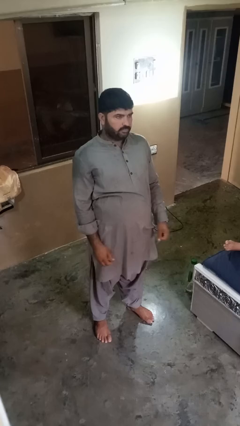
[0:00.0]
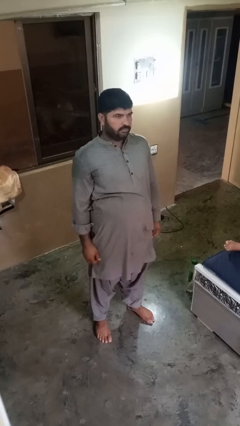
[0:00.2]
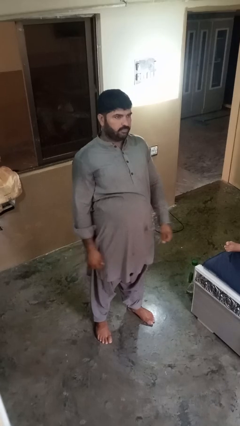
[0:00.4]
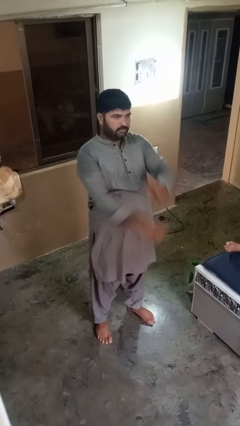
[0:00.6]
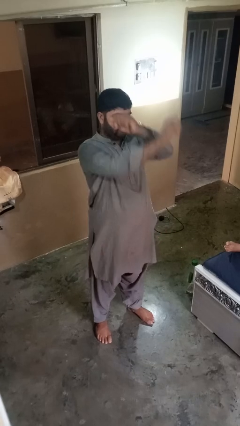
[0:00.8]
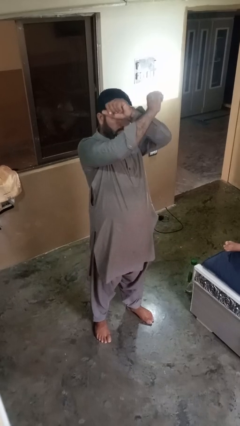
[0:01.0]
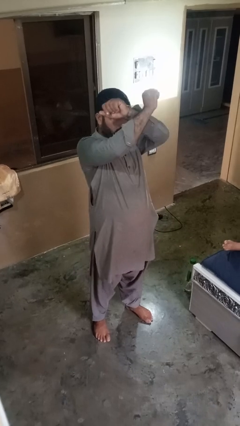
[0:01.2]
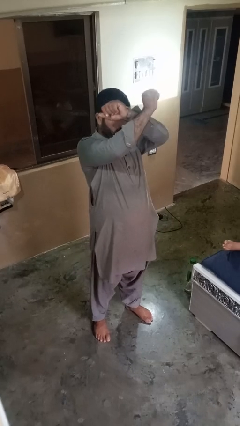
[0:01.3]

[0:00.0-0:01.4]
person gestures arms x

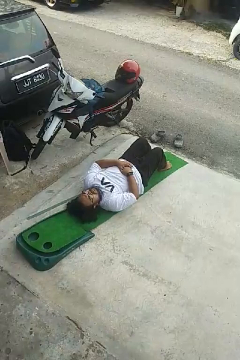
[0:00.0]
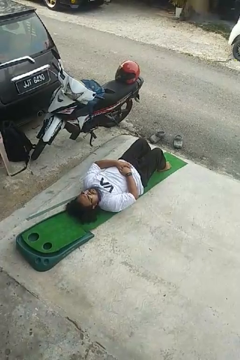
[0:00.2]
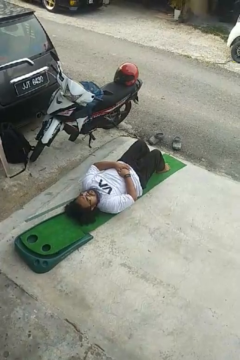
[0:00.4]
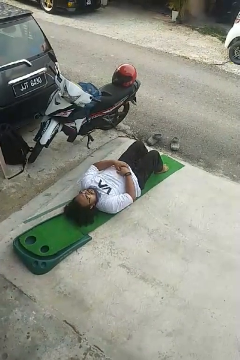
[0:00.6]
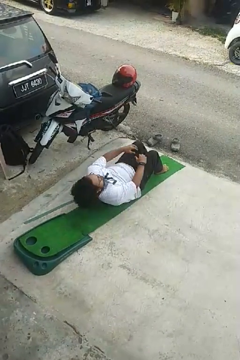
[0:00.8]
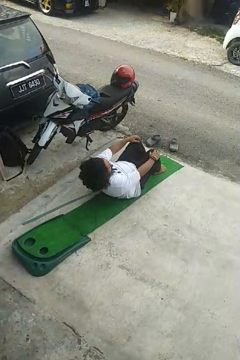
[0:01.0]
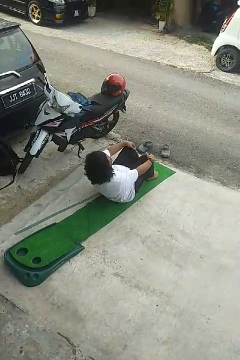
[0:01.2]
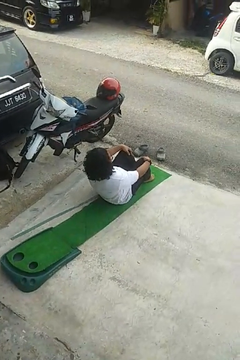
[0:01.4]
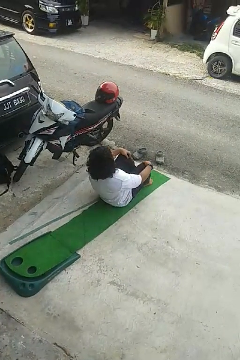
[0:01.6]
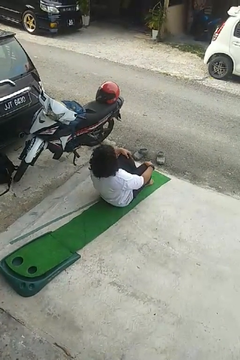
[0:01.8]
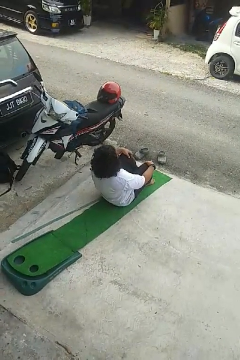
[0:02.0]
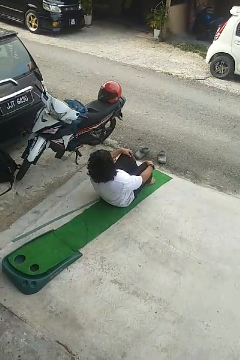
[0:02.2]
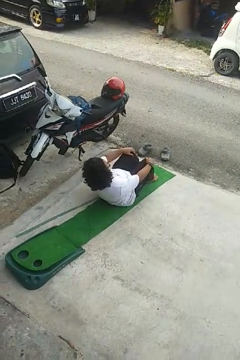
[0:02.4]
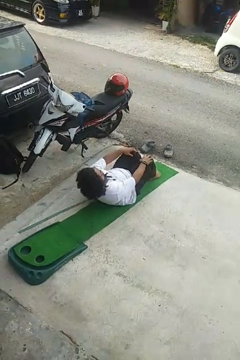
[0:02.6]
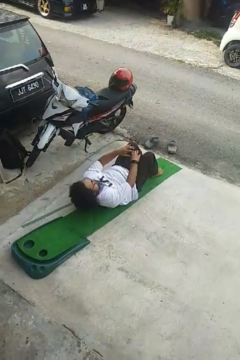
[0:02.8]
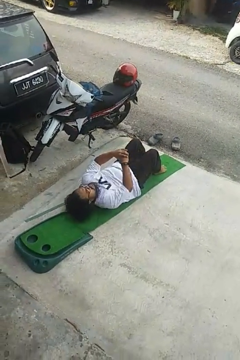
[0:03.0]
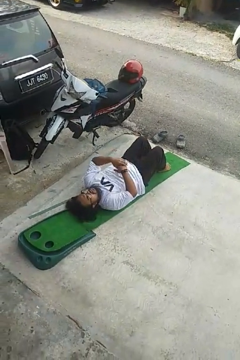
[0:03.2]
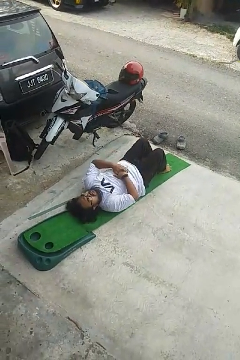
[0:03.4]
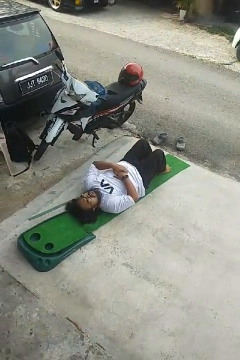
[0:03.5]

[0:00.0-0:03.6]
person exercises with situp

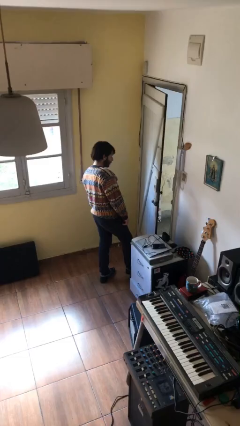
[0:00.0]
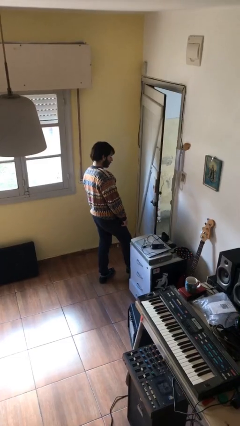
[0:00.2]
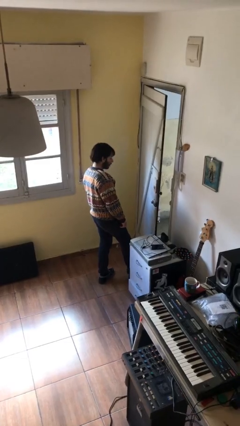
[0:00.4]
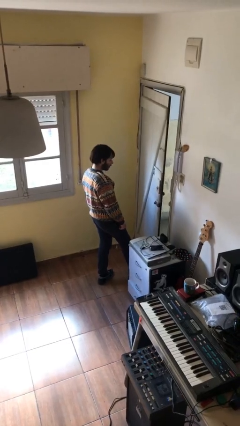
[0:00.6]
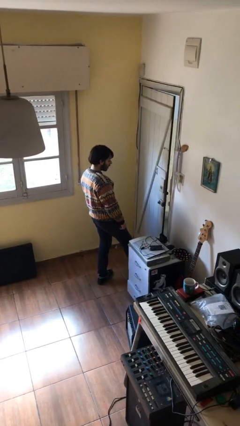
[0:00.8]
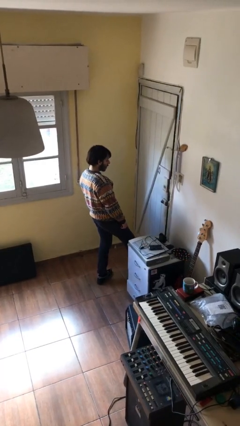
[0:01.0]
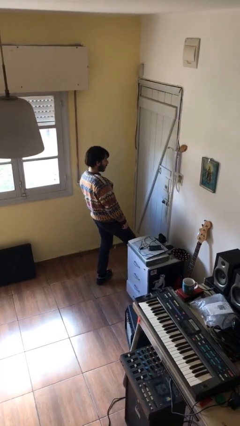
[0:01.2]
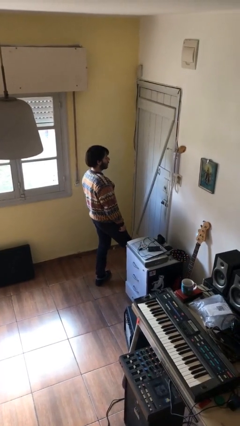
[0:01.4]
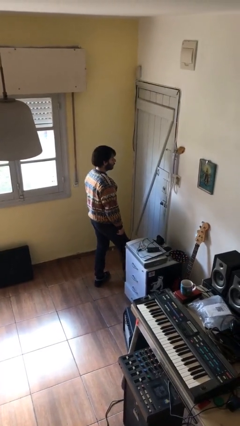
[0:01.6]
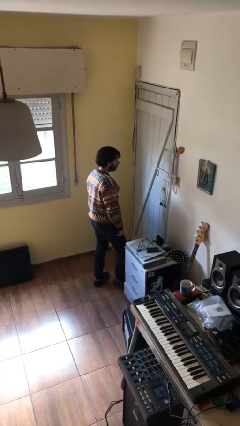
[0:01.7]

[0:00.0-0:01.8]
person closes door with foot

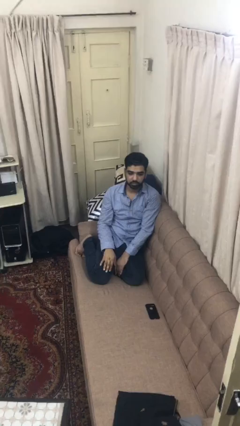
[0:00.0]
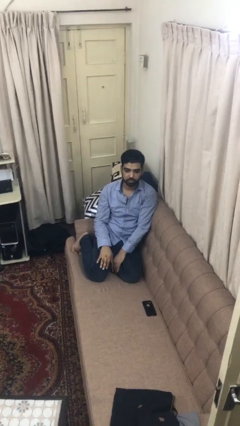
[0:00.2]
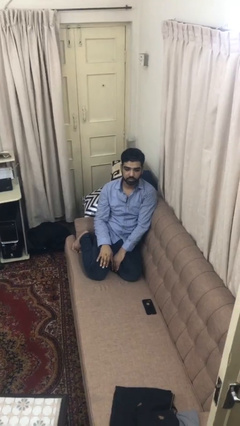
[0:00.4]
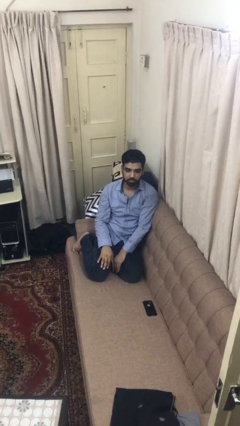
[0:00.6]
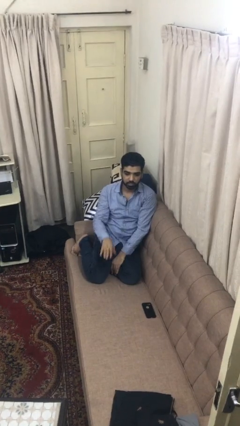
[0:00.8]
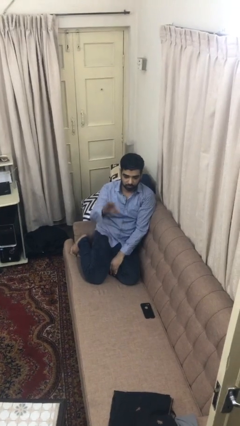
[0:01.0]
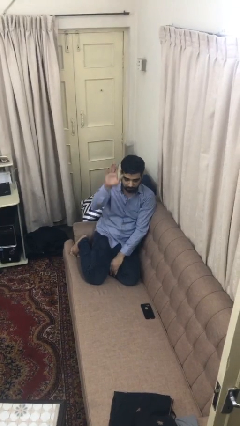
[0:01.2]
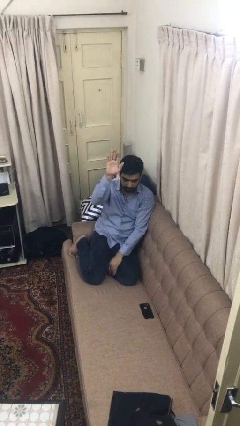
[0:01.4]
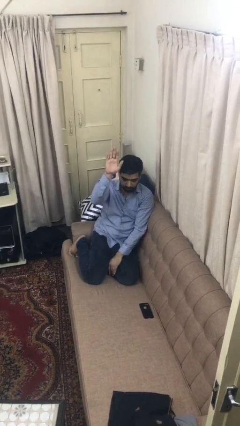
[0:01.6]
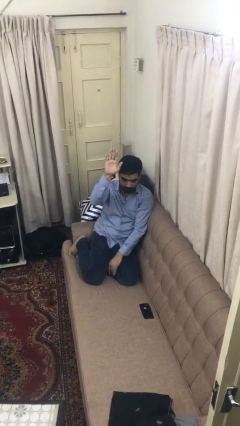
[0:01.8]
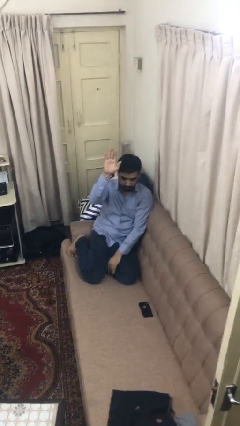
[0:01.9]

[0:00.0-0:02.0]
person gestures raise hand

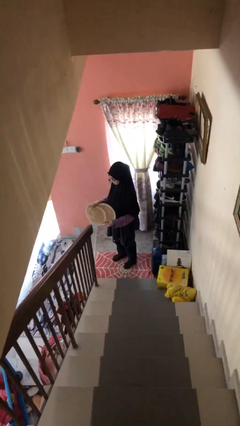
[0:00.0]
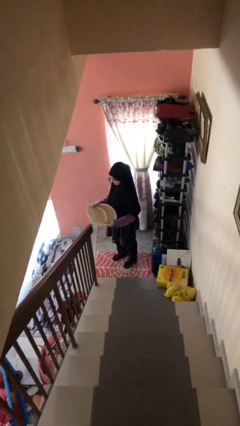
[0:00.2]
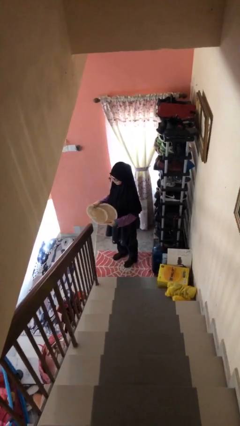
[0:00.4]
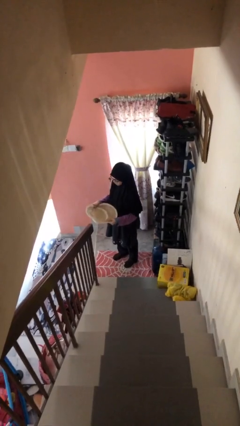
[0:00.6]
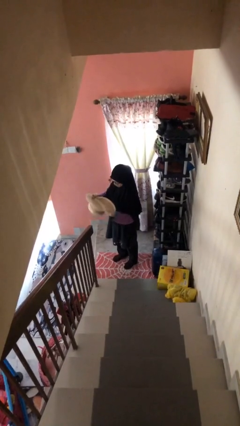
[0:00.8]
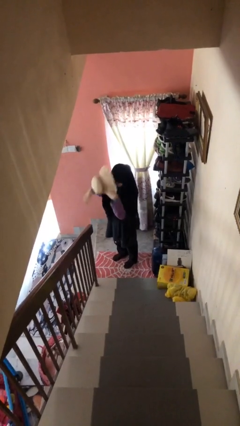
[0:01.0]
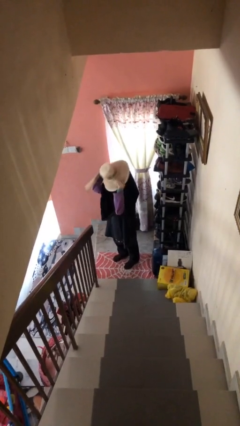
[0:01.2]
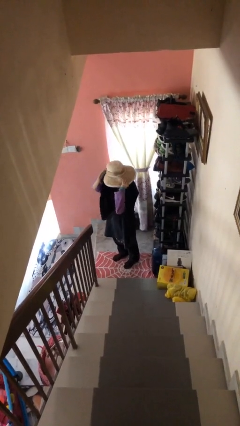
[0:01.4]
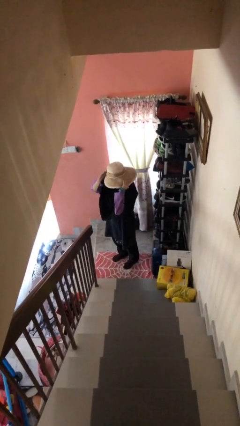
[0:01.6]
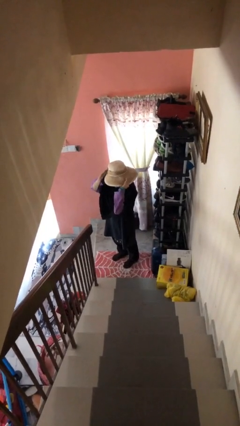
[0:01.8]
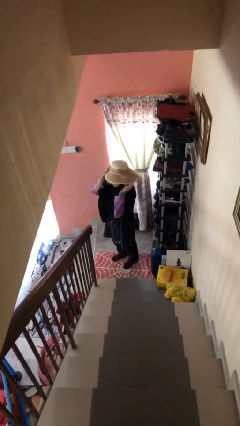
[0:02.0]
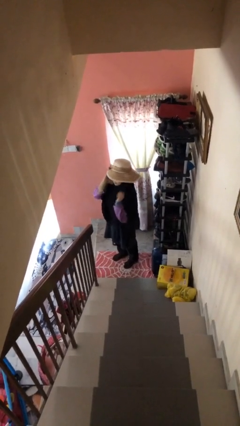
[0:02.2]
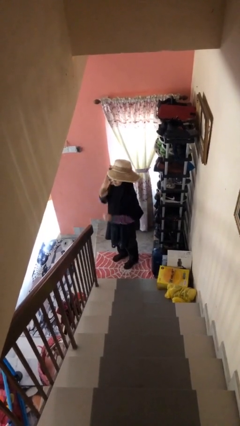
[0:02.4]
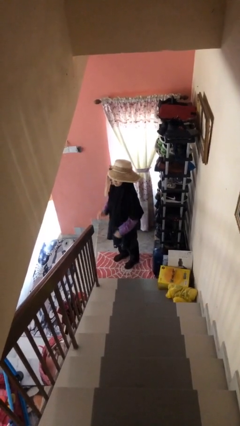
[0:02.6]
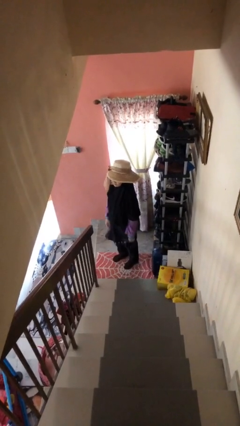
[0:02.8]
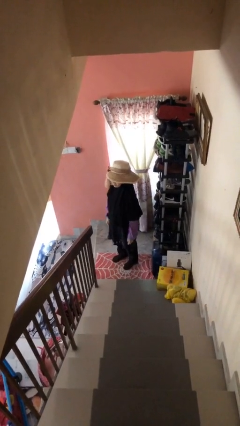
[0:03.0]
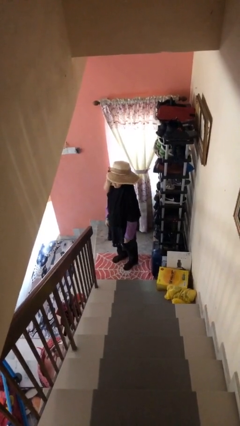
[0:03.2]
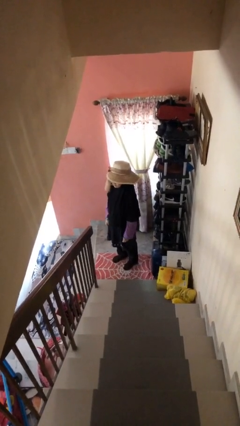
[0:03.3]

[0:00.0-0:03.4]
person puts on hat

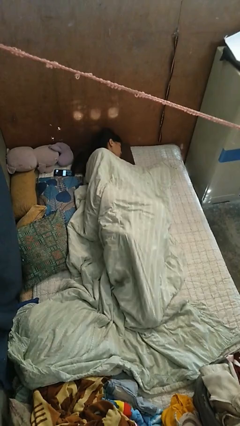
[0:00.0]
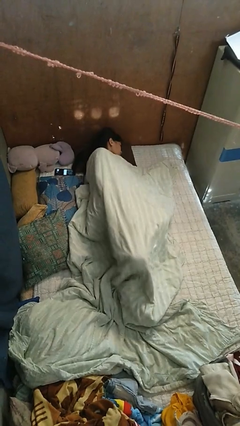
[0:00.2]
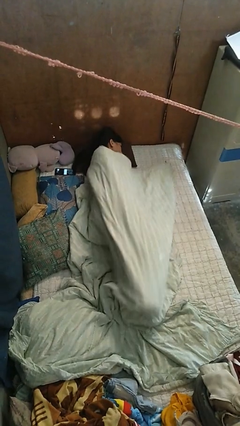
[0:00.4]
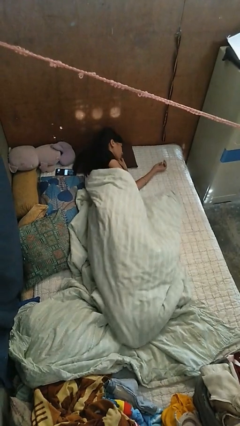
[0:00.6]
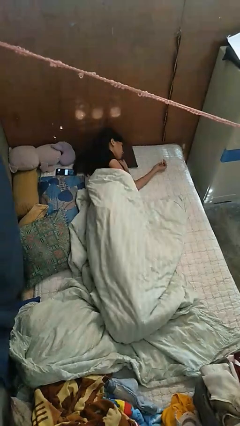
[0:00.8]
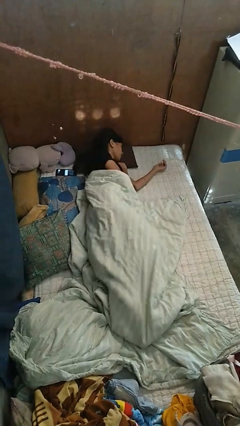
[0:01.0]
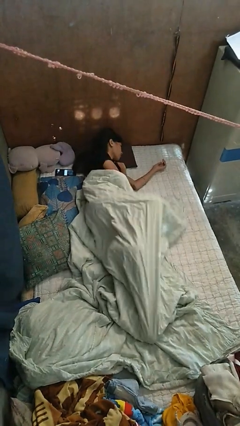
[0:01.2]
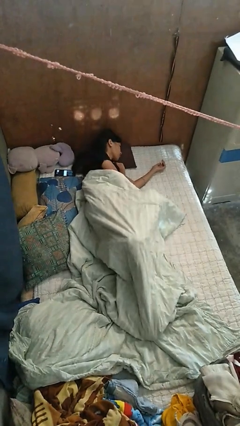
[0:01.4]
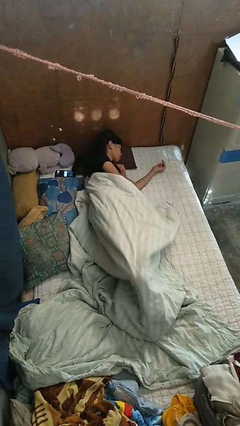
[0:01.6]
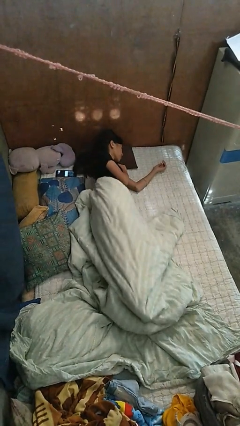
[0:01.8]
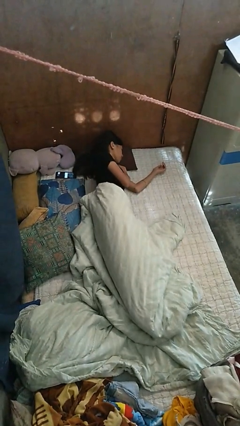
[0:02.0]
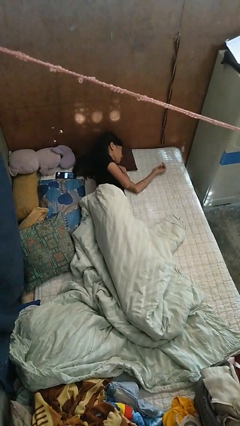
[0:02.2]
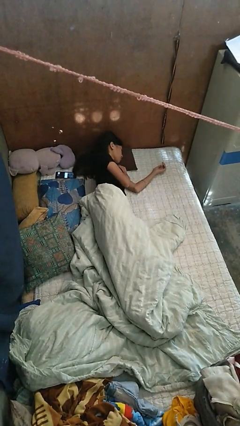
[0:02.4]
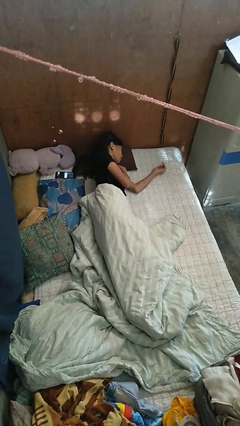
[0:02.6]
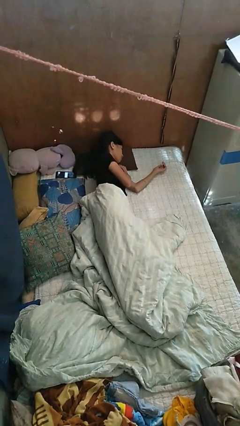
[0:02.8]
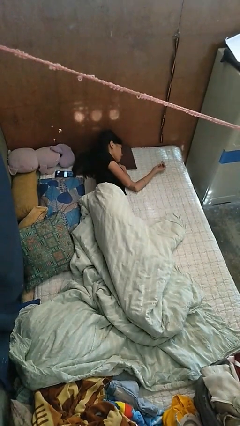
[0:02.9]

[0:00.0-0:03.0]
person uncovers with bedsheets

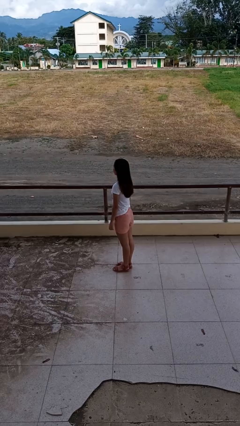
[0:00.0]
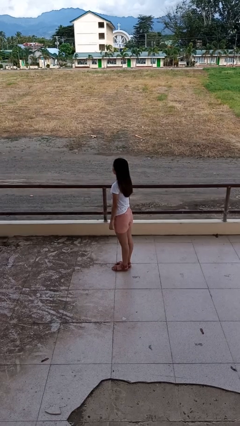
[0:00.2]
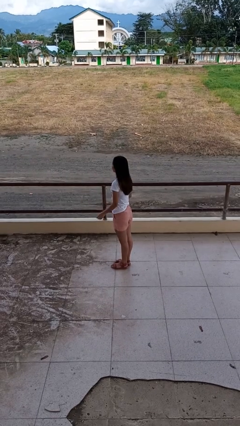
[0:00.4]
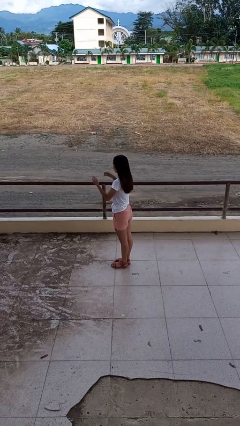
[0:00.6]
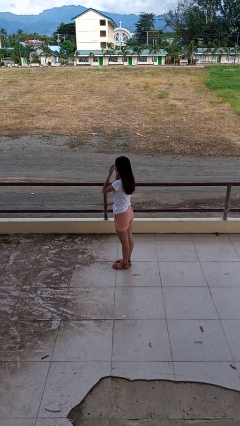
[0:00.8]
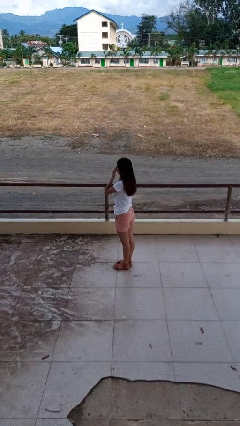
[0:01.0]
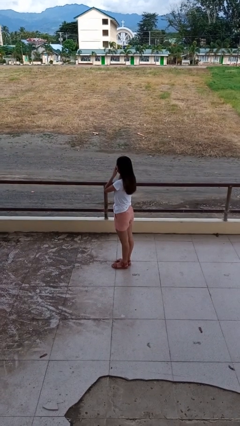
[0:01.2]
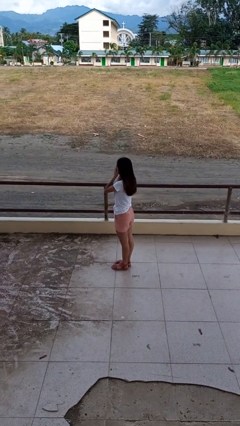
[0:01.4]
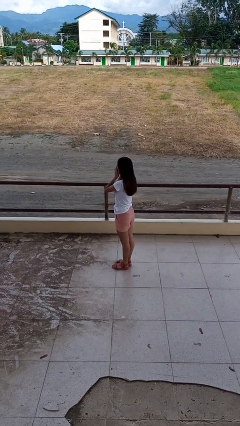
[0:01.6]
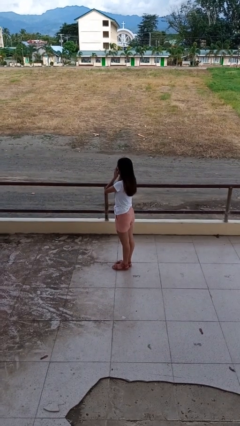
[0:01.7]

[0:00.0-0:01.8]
person rubs eyes

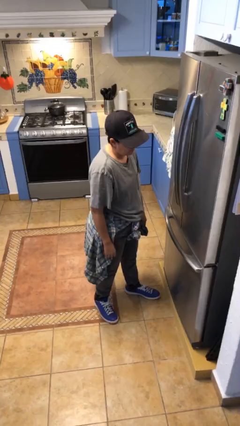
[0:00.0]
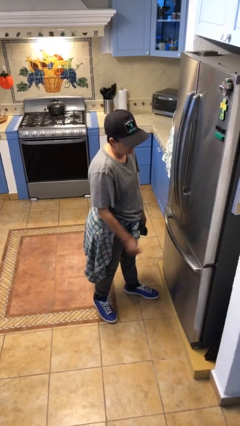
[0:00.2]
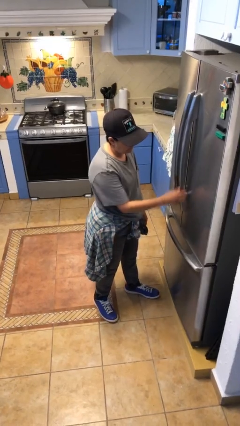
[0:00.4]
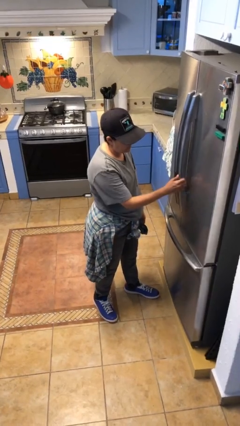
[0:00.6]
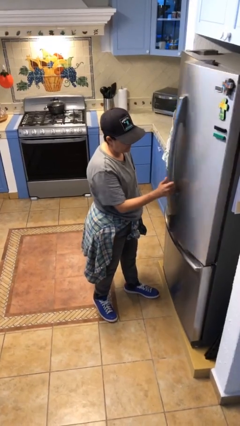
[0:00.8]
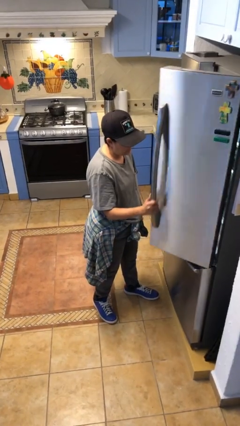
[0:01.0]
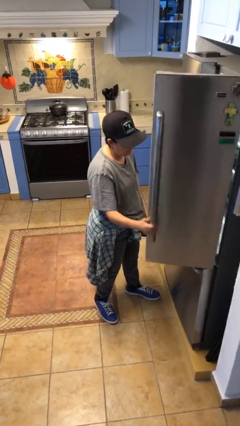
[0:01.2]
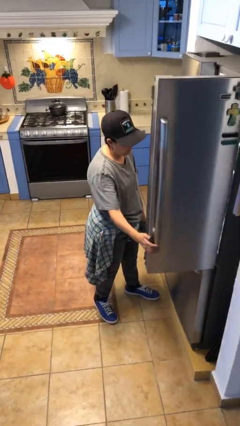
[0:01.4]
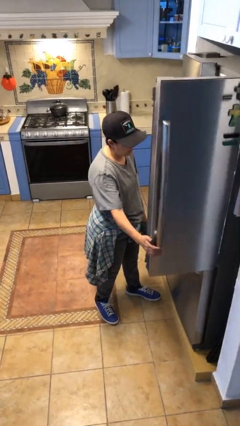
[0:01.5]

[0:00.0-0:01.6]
person opens refrigerator
